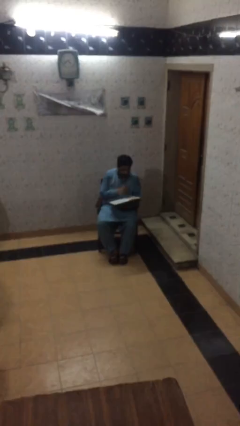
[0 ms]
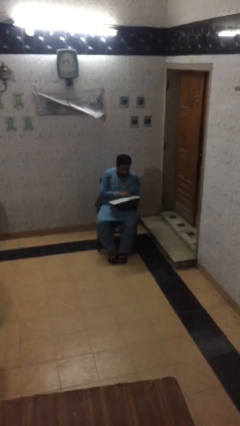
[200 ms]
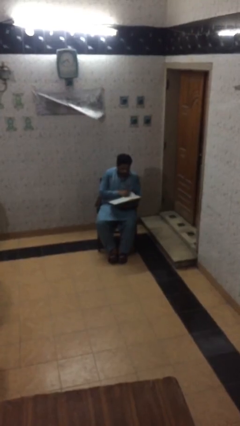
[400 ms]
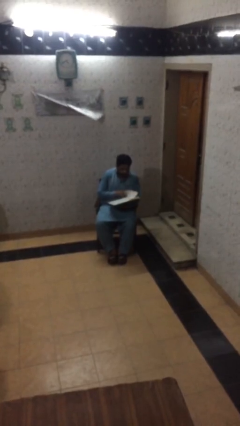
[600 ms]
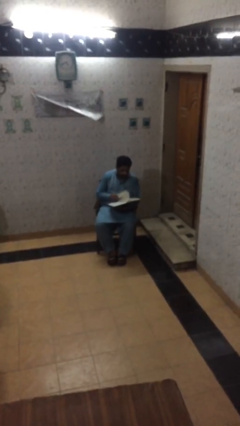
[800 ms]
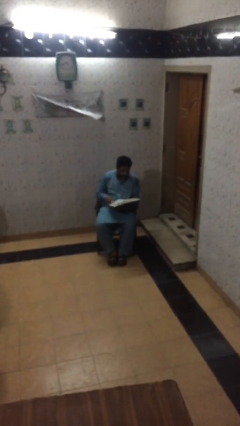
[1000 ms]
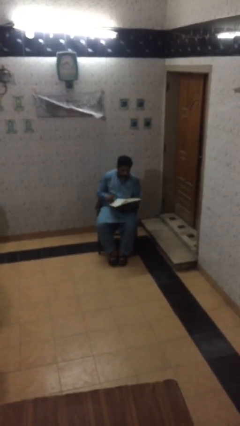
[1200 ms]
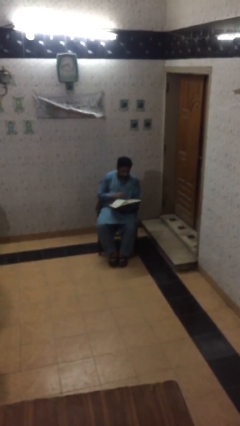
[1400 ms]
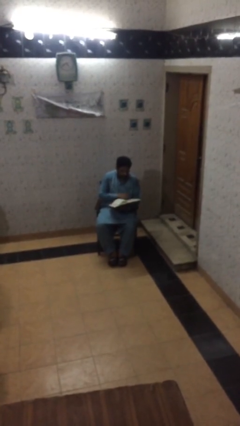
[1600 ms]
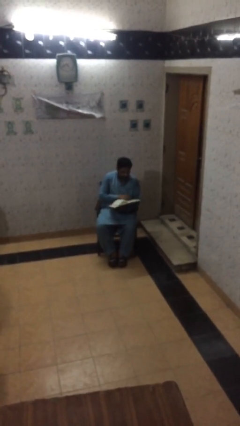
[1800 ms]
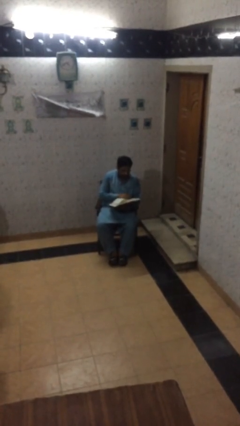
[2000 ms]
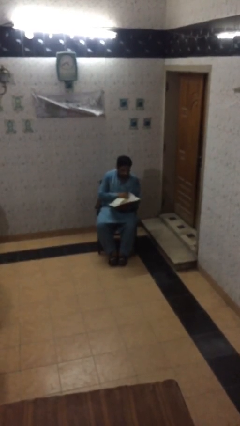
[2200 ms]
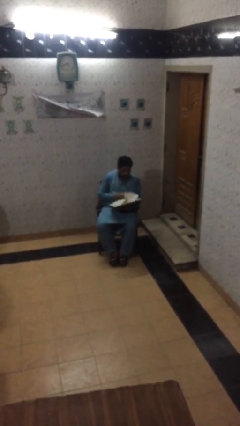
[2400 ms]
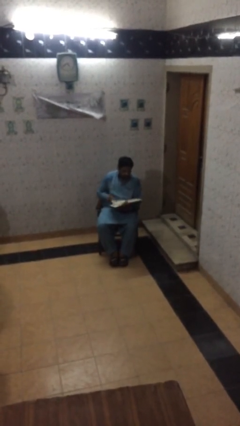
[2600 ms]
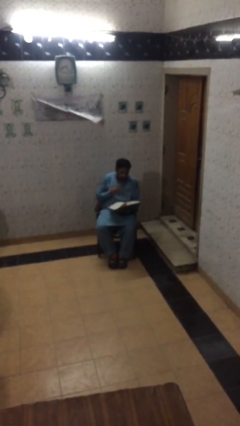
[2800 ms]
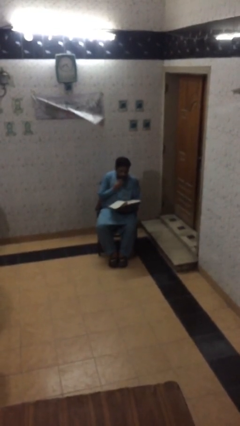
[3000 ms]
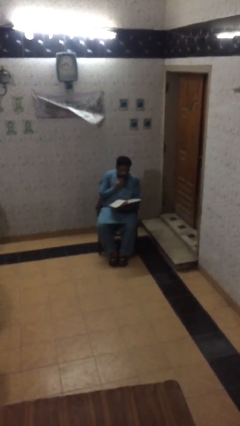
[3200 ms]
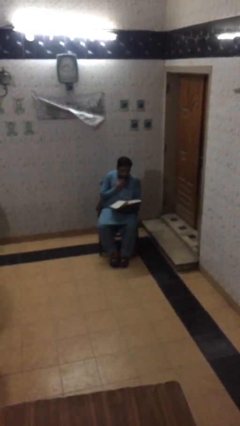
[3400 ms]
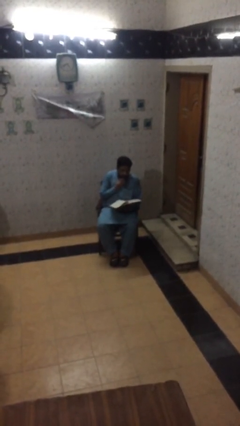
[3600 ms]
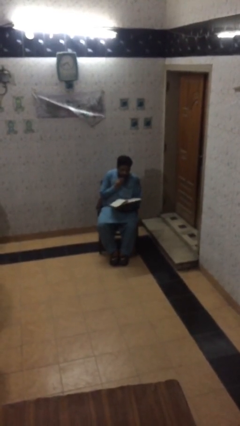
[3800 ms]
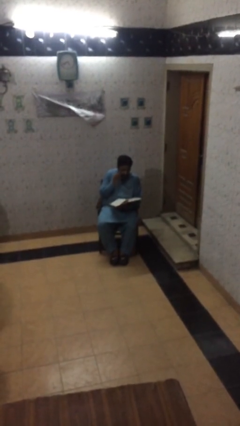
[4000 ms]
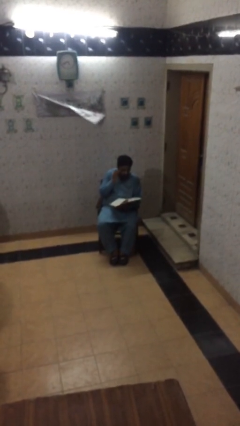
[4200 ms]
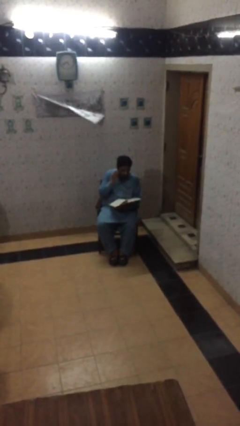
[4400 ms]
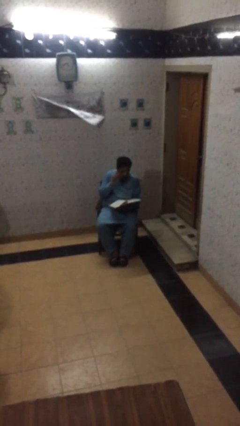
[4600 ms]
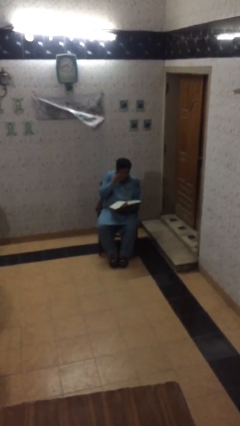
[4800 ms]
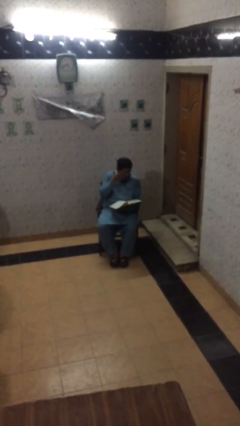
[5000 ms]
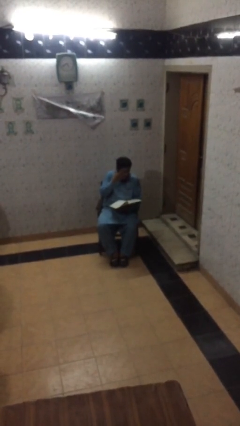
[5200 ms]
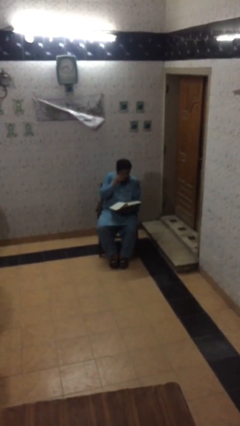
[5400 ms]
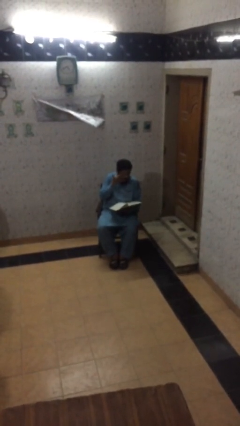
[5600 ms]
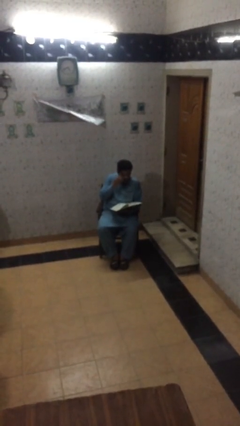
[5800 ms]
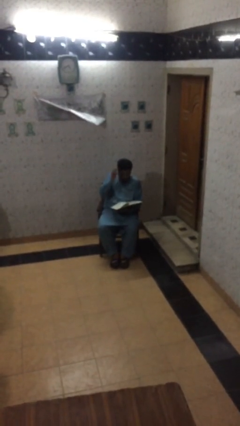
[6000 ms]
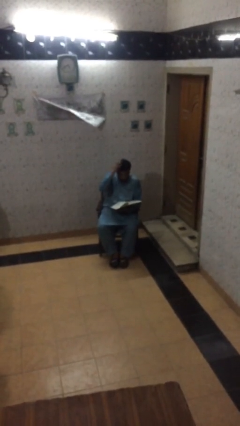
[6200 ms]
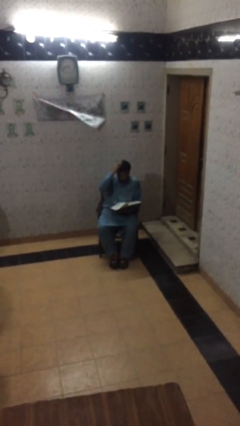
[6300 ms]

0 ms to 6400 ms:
person reads document

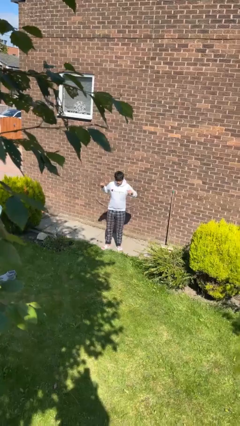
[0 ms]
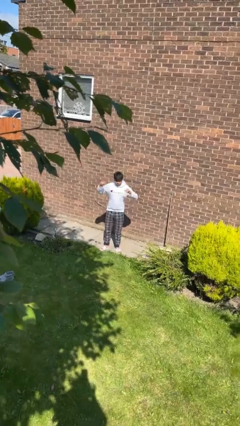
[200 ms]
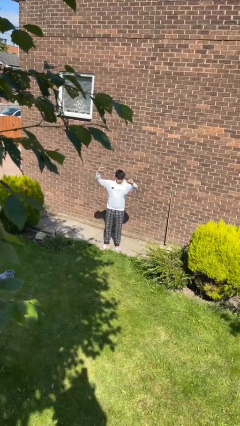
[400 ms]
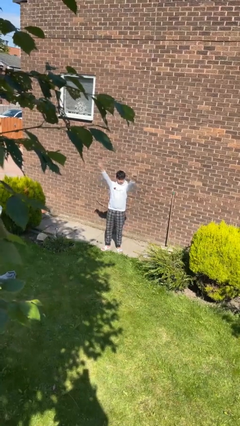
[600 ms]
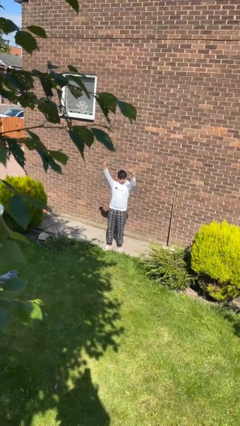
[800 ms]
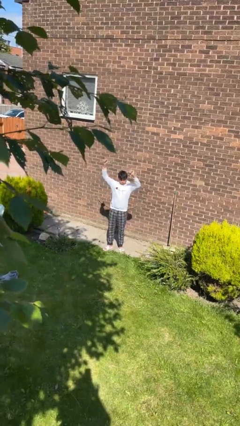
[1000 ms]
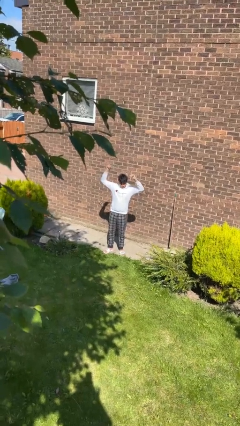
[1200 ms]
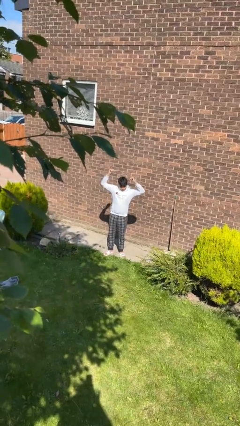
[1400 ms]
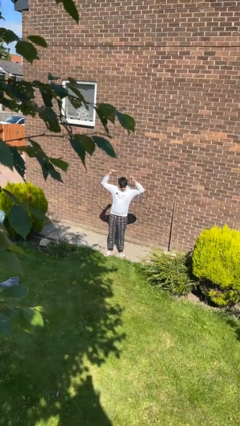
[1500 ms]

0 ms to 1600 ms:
person stretches arms over head

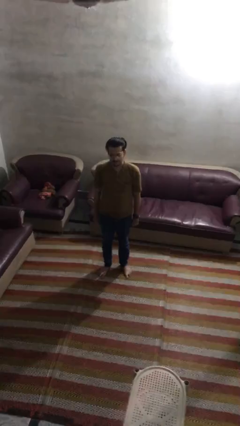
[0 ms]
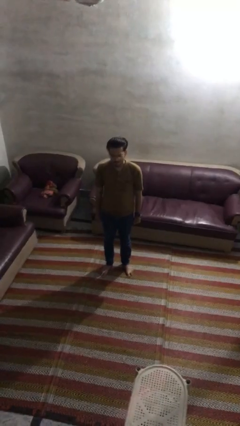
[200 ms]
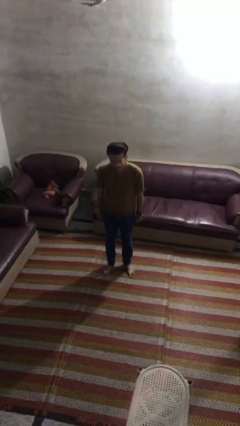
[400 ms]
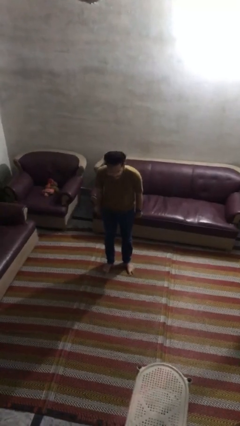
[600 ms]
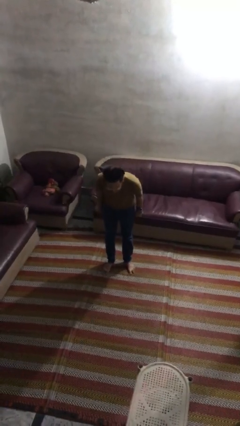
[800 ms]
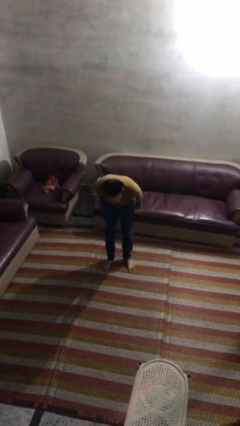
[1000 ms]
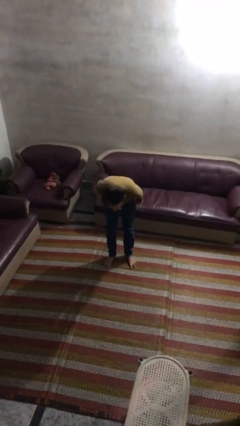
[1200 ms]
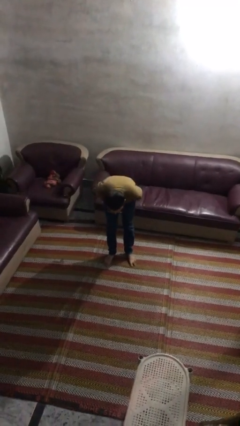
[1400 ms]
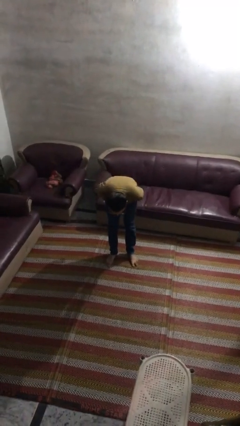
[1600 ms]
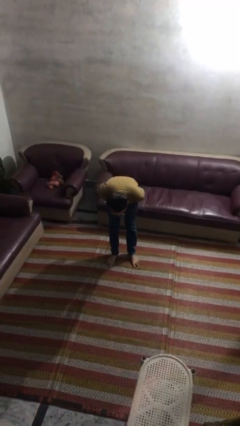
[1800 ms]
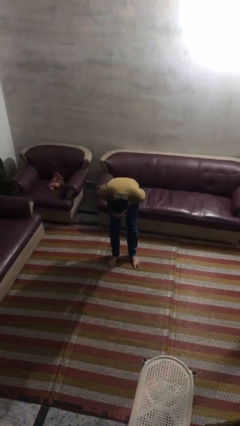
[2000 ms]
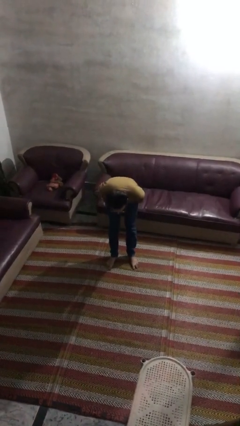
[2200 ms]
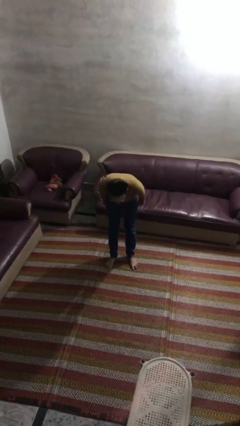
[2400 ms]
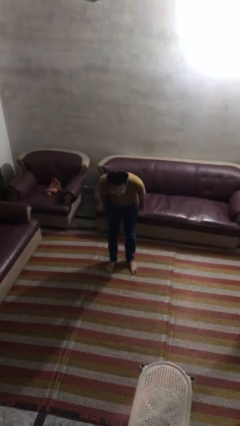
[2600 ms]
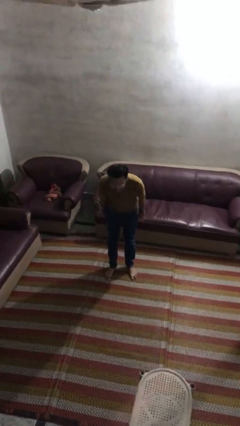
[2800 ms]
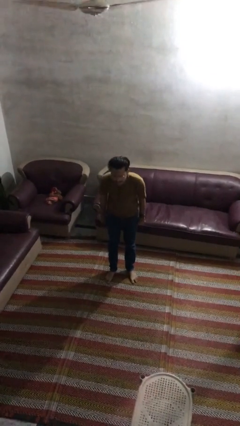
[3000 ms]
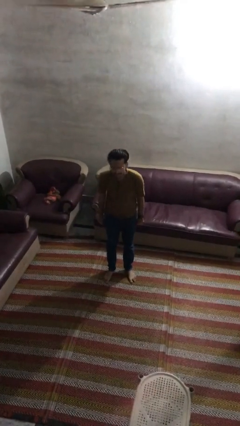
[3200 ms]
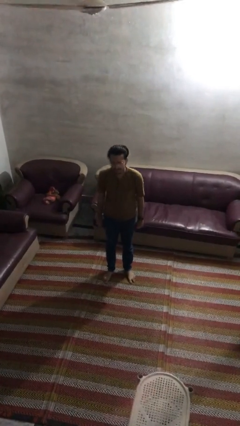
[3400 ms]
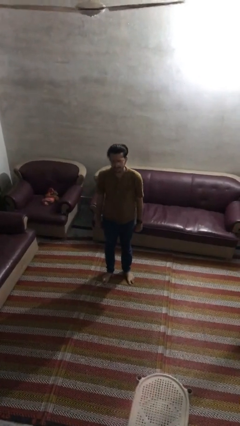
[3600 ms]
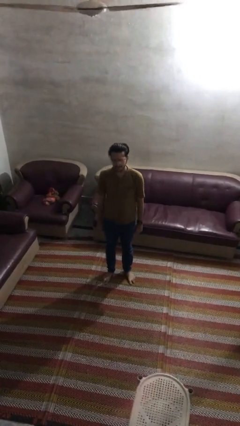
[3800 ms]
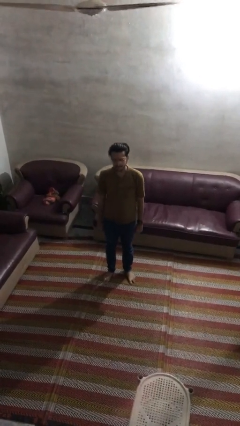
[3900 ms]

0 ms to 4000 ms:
person bows

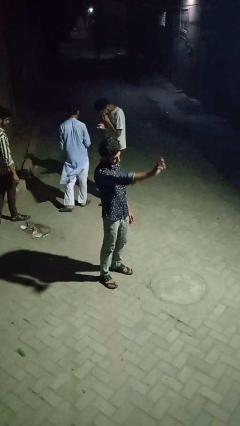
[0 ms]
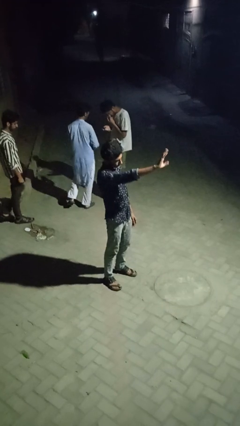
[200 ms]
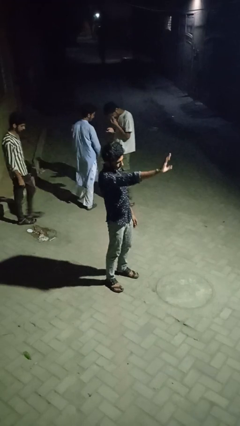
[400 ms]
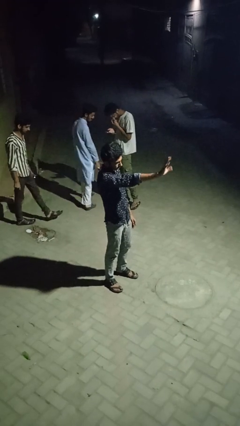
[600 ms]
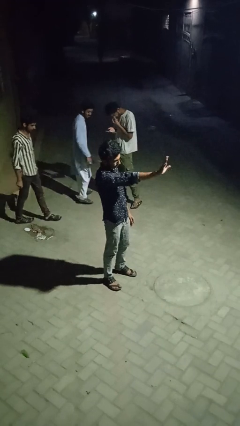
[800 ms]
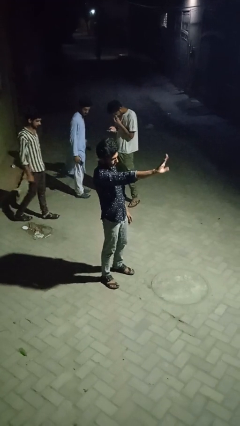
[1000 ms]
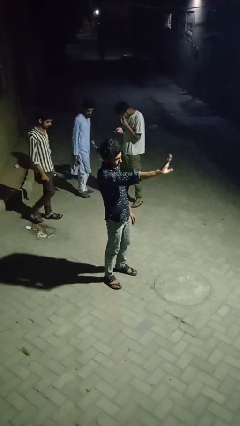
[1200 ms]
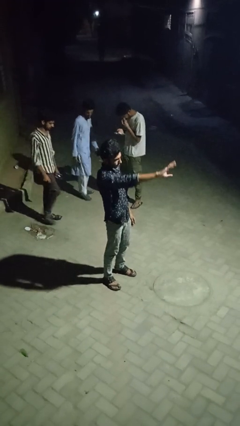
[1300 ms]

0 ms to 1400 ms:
person waves at person

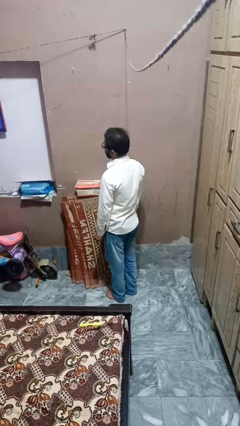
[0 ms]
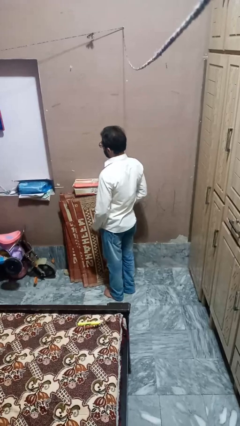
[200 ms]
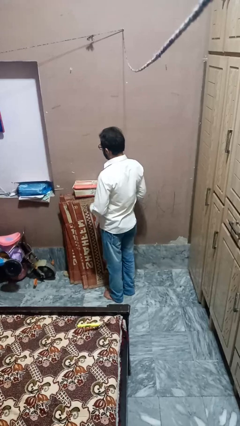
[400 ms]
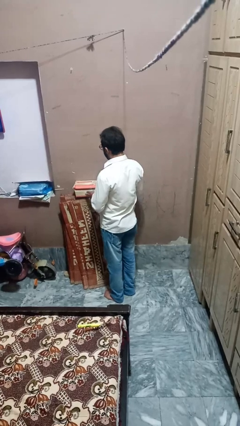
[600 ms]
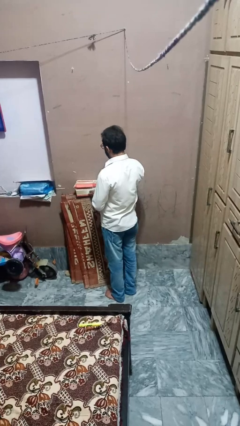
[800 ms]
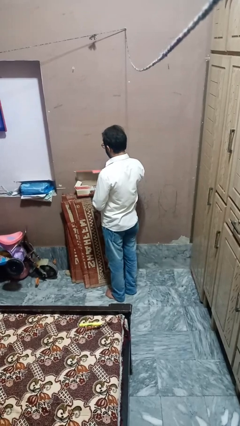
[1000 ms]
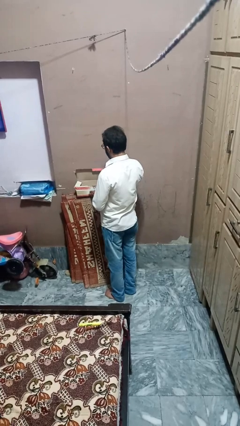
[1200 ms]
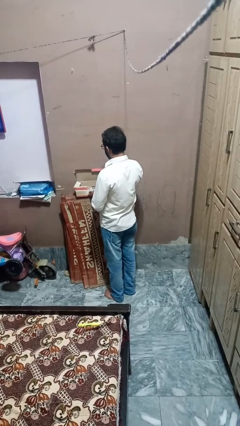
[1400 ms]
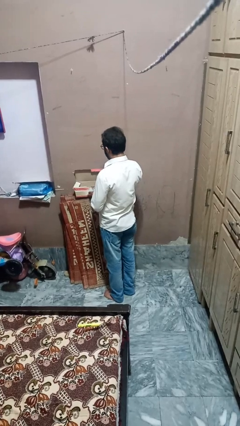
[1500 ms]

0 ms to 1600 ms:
person opens mailbox

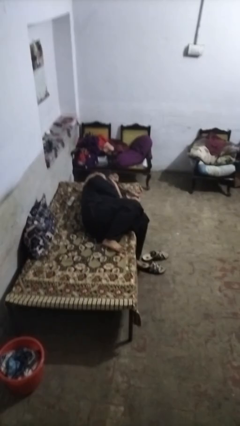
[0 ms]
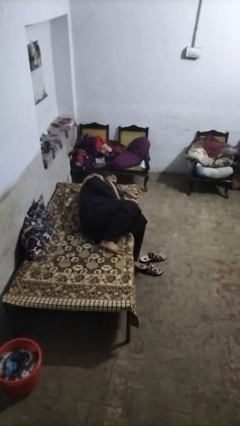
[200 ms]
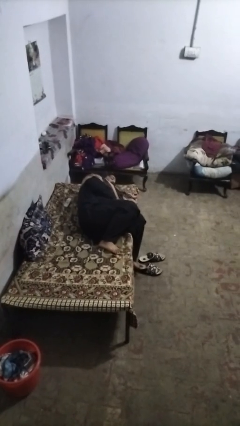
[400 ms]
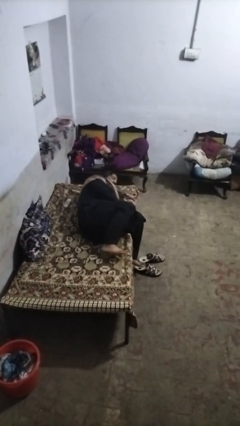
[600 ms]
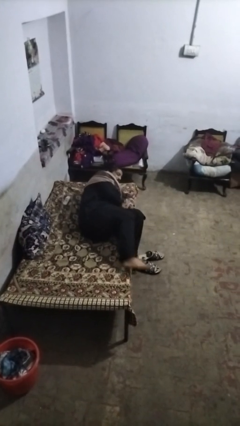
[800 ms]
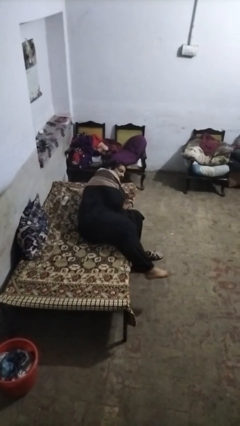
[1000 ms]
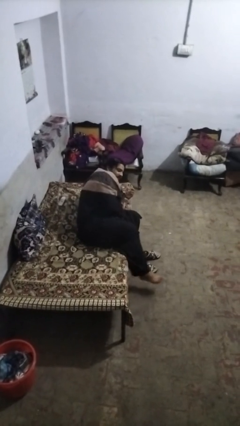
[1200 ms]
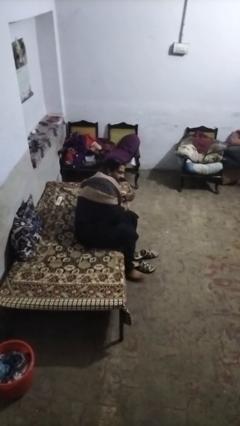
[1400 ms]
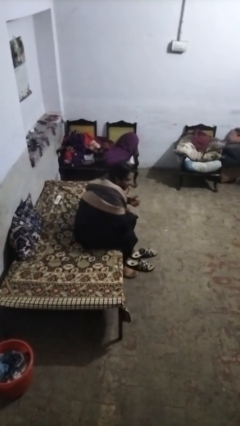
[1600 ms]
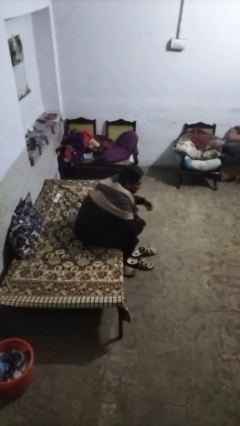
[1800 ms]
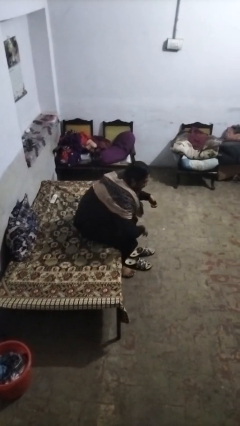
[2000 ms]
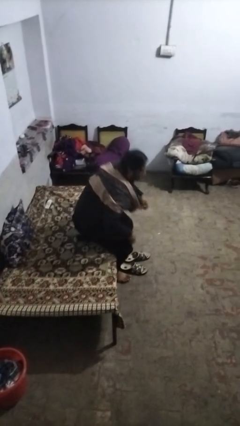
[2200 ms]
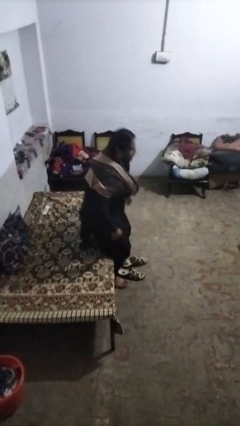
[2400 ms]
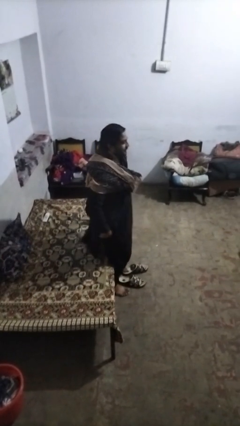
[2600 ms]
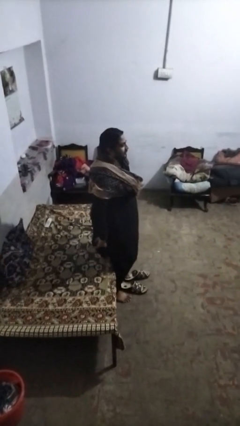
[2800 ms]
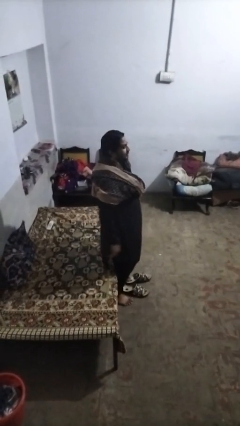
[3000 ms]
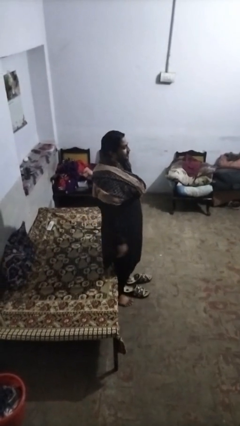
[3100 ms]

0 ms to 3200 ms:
person stands up
